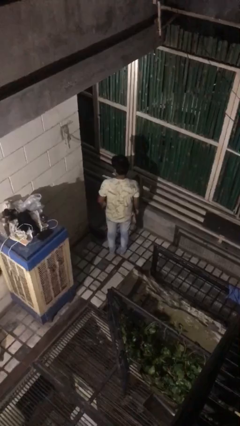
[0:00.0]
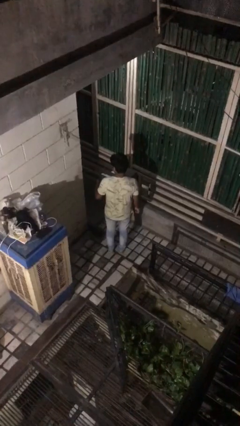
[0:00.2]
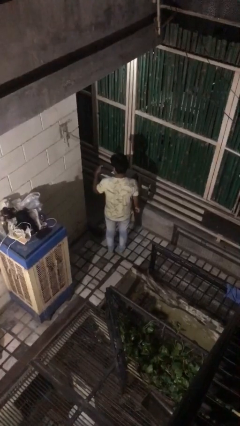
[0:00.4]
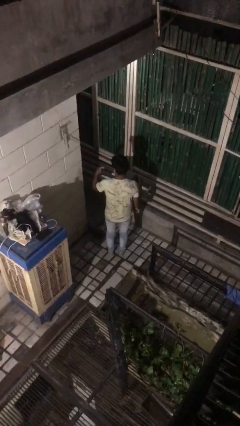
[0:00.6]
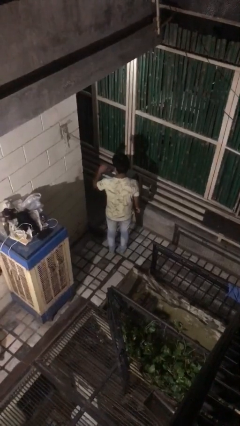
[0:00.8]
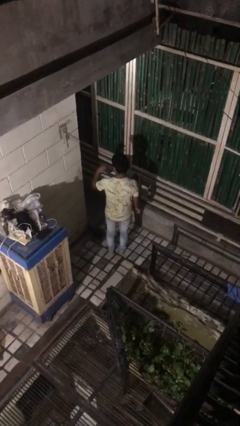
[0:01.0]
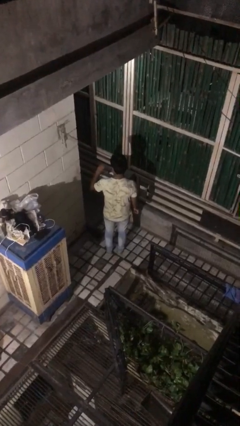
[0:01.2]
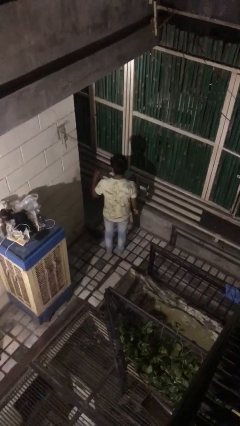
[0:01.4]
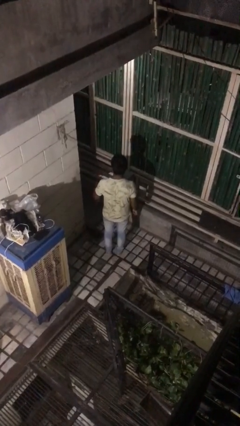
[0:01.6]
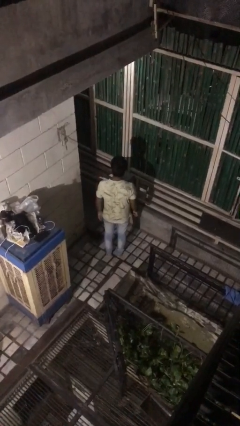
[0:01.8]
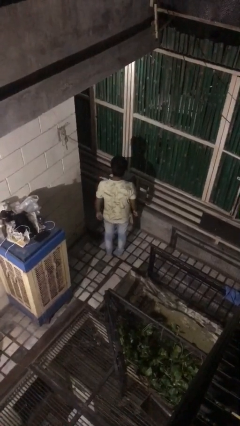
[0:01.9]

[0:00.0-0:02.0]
person gestures behind me

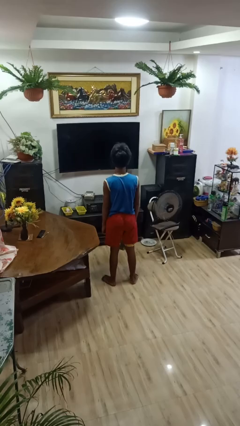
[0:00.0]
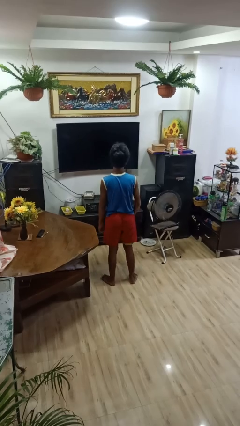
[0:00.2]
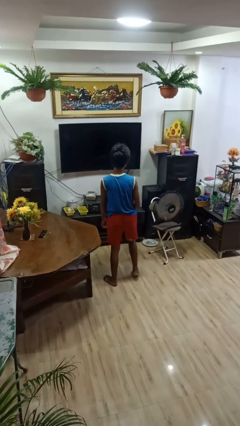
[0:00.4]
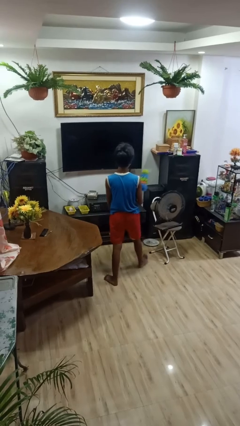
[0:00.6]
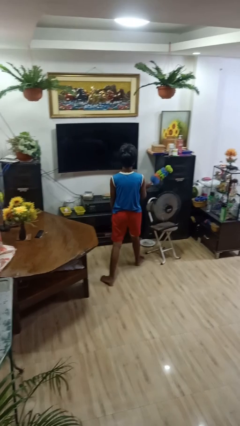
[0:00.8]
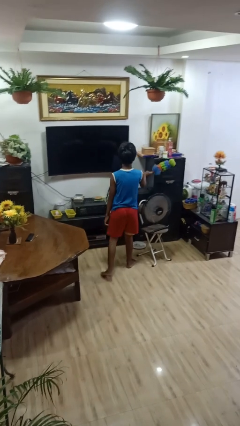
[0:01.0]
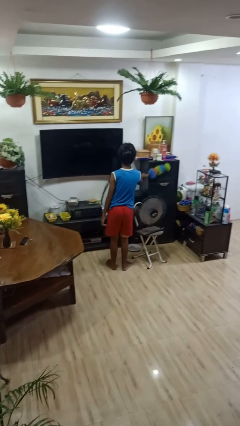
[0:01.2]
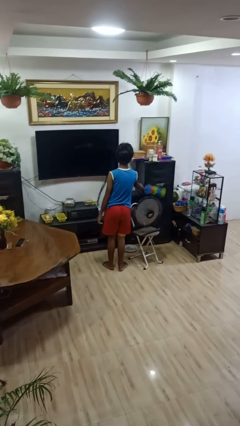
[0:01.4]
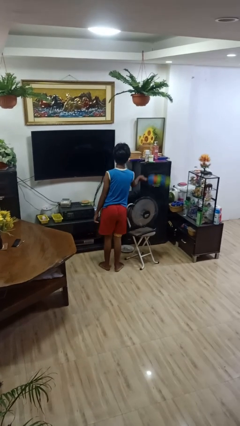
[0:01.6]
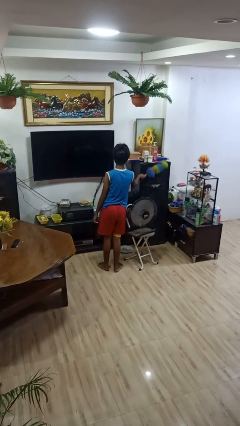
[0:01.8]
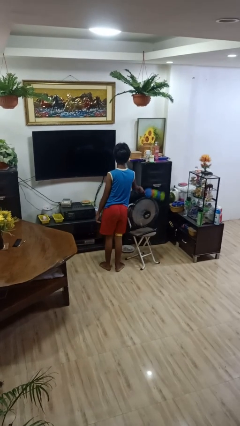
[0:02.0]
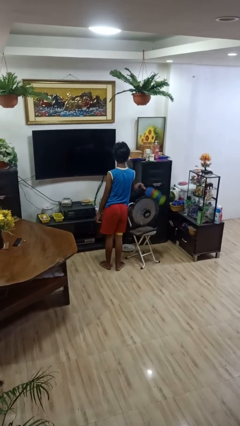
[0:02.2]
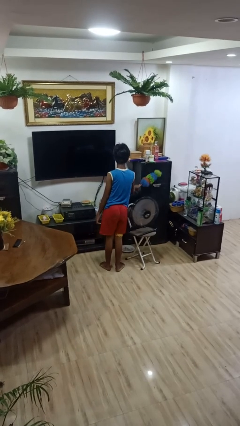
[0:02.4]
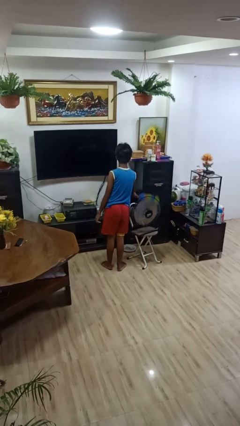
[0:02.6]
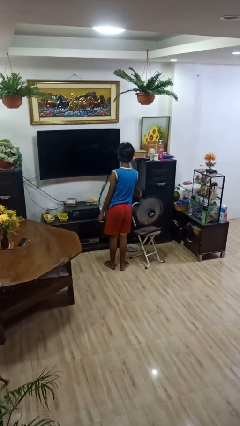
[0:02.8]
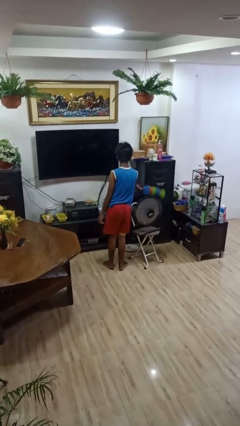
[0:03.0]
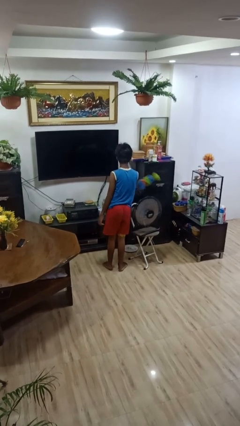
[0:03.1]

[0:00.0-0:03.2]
person dusts furniture

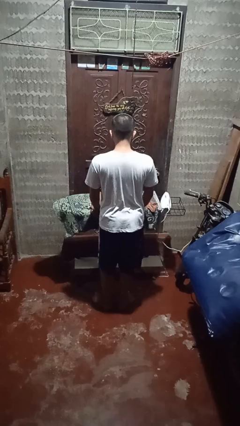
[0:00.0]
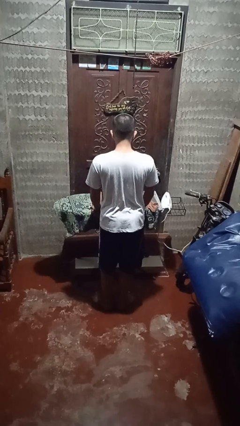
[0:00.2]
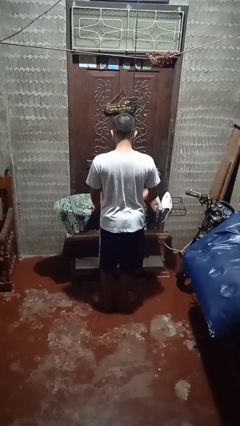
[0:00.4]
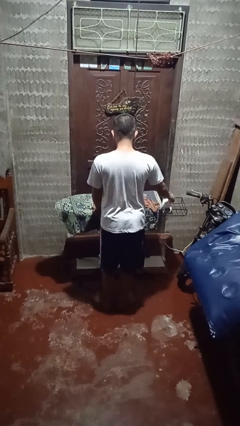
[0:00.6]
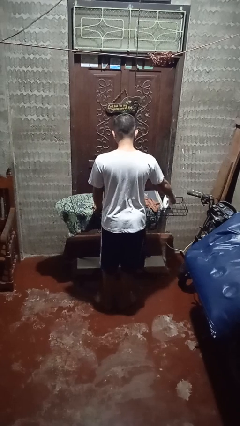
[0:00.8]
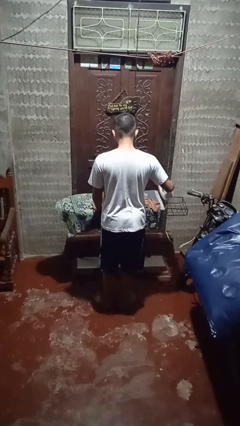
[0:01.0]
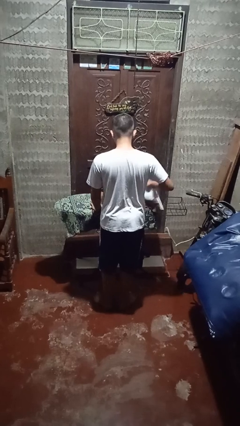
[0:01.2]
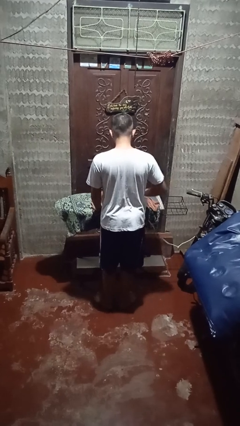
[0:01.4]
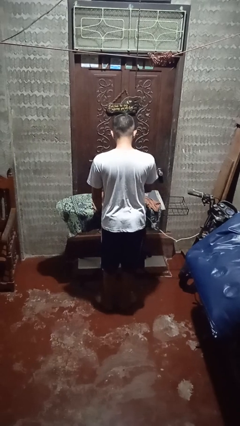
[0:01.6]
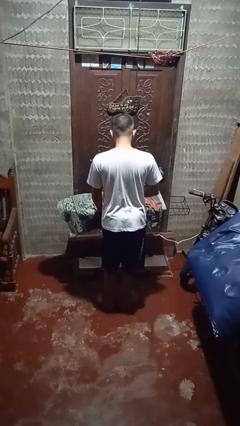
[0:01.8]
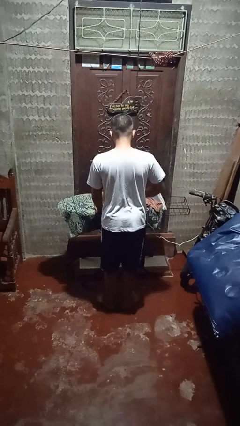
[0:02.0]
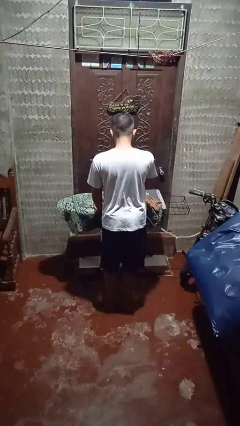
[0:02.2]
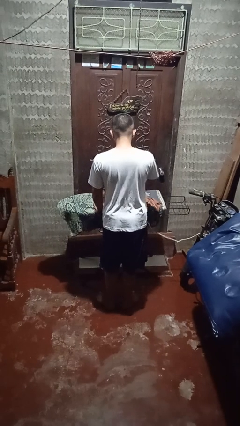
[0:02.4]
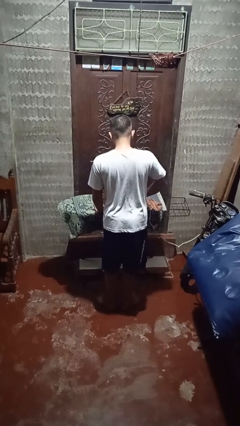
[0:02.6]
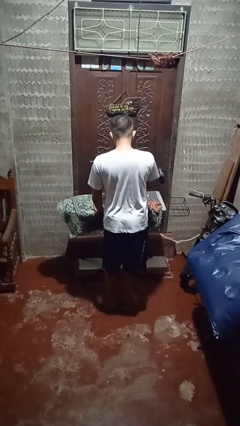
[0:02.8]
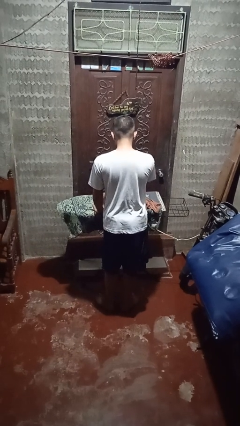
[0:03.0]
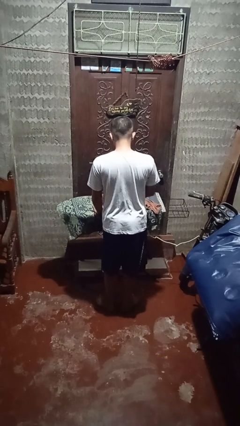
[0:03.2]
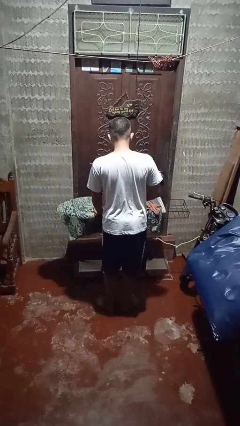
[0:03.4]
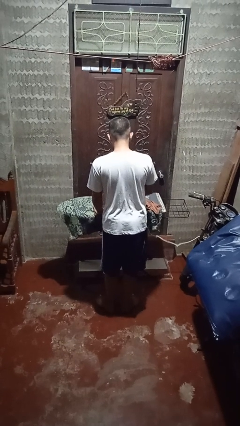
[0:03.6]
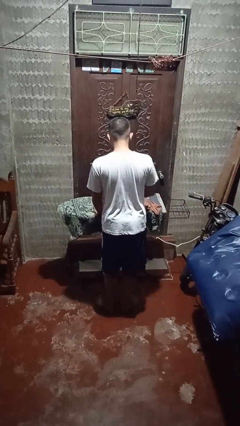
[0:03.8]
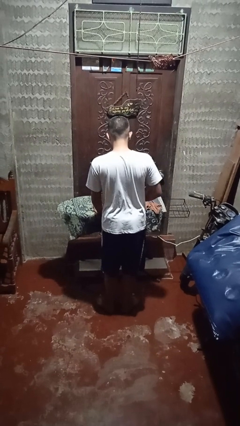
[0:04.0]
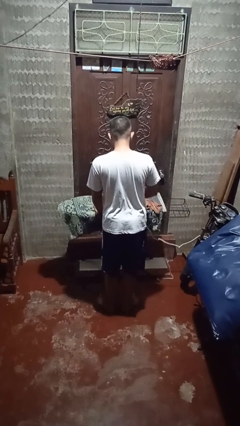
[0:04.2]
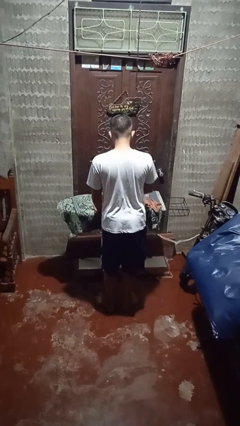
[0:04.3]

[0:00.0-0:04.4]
person irons clothes

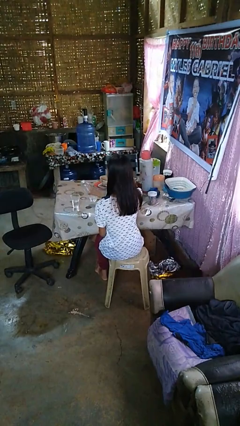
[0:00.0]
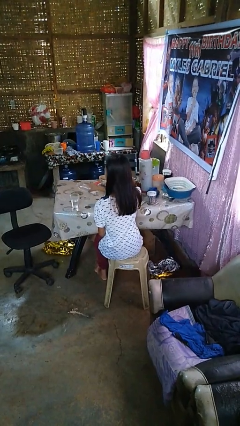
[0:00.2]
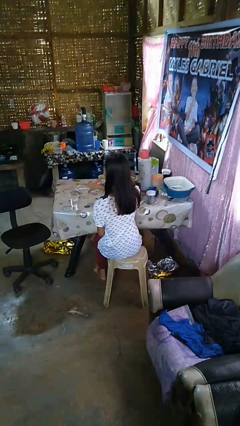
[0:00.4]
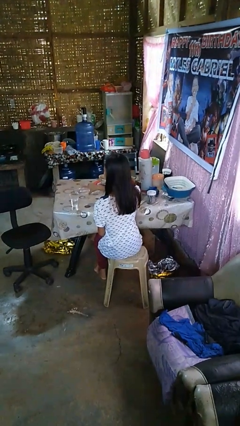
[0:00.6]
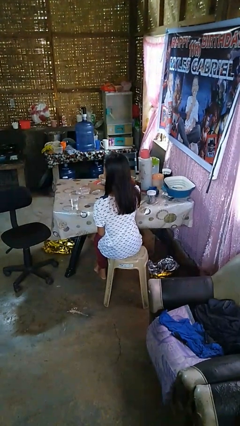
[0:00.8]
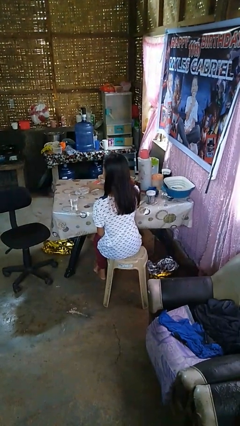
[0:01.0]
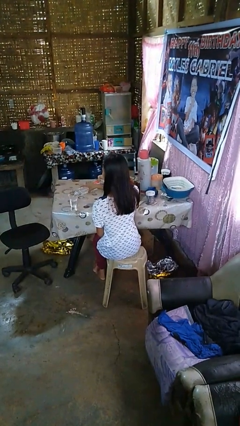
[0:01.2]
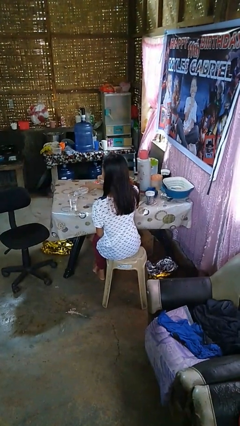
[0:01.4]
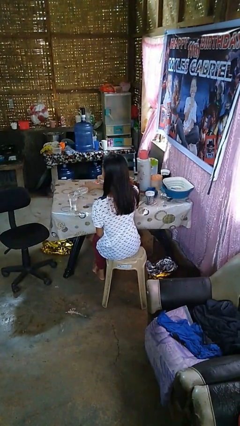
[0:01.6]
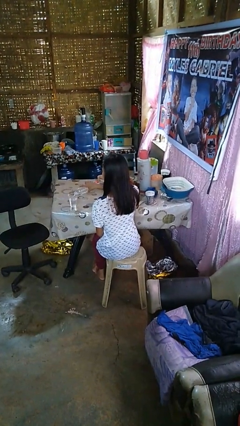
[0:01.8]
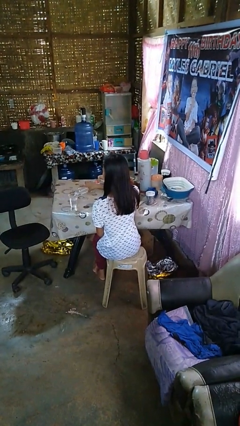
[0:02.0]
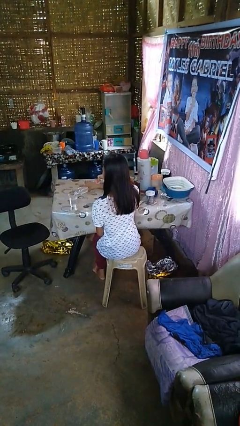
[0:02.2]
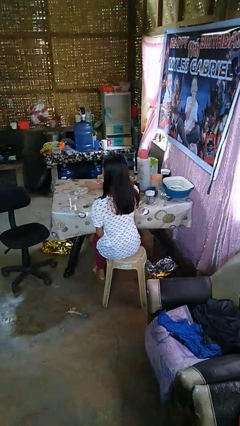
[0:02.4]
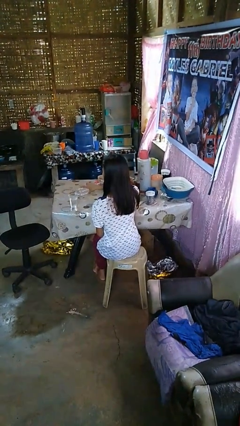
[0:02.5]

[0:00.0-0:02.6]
person pours liquid into cup

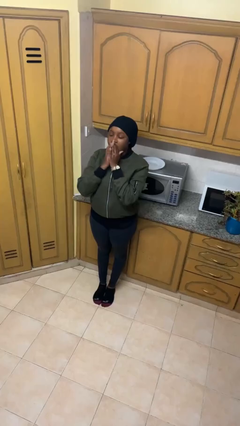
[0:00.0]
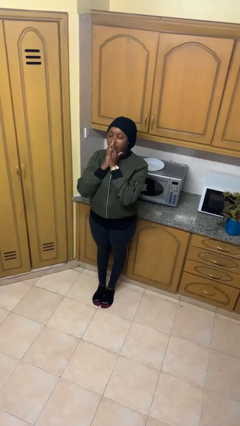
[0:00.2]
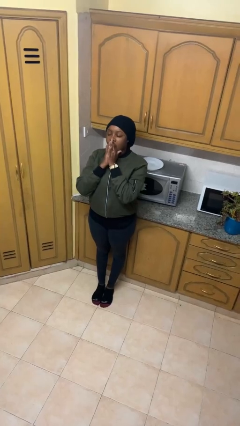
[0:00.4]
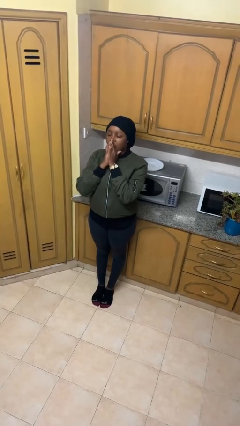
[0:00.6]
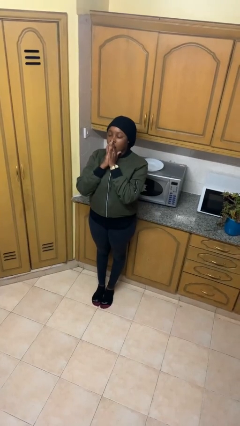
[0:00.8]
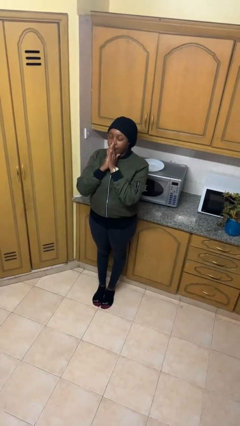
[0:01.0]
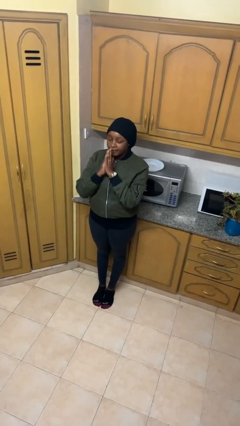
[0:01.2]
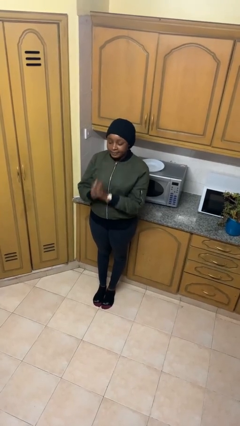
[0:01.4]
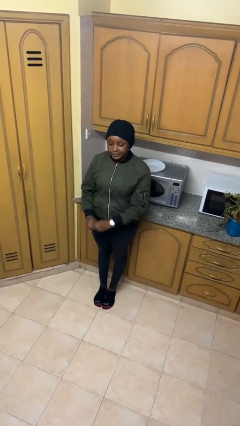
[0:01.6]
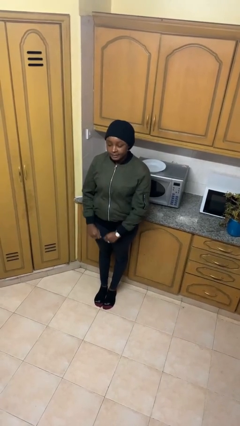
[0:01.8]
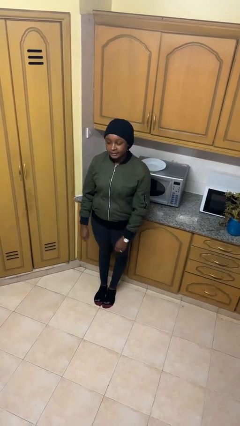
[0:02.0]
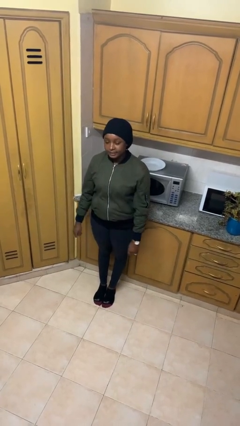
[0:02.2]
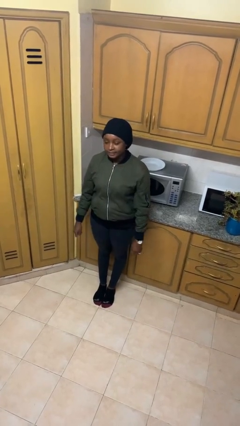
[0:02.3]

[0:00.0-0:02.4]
person yawns

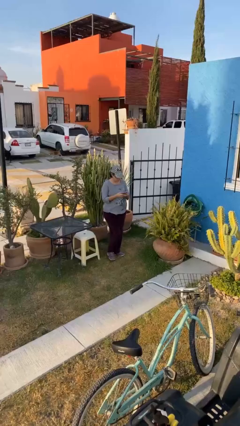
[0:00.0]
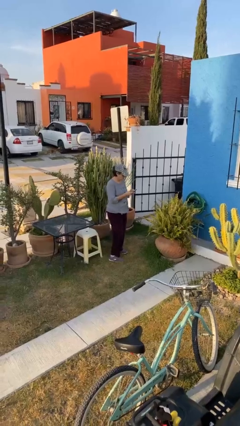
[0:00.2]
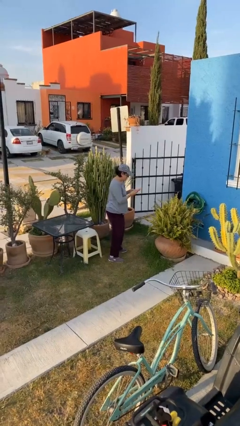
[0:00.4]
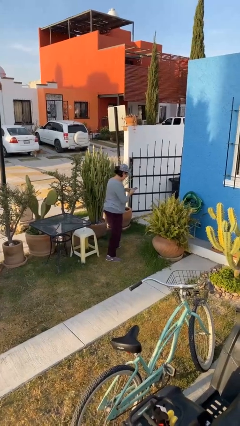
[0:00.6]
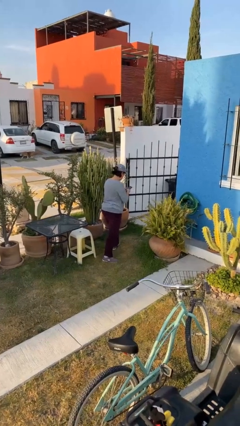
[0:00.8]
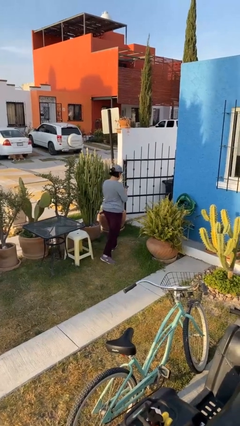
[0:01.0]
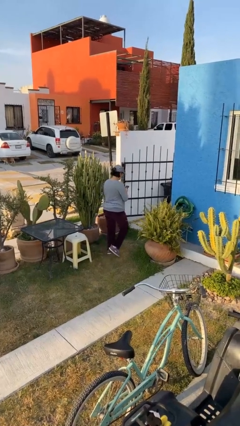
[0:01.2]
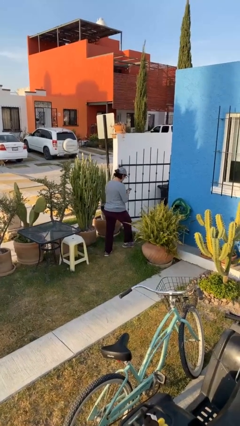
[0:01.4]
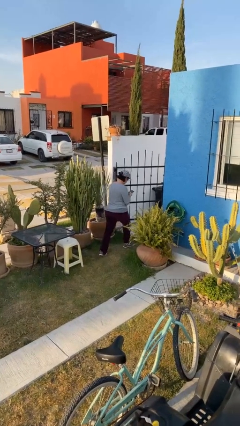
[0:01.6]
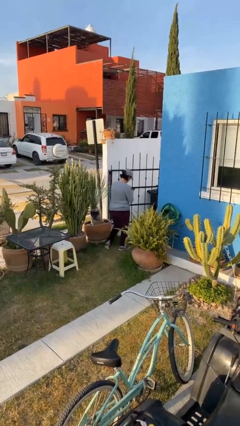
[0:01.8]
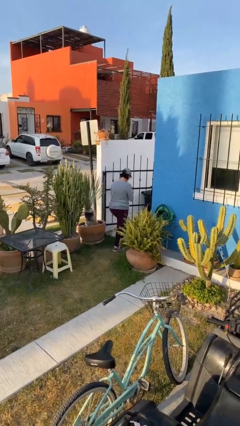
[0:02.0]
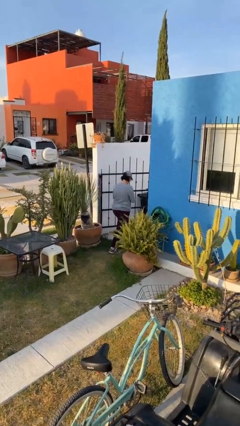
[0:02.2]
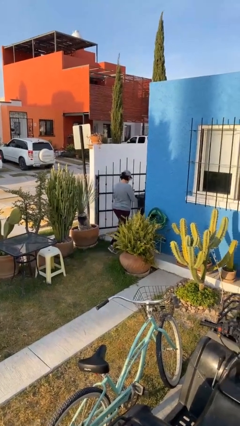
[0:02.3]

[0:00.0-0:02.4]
person exits scene through structure

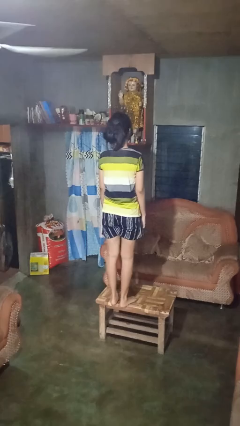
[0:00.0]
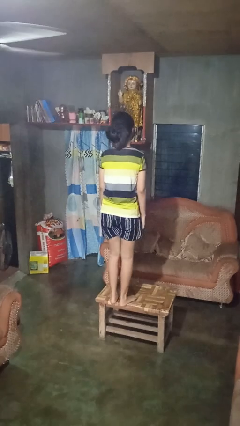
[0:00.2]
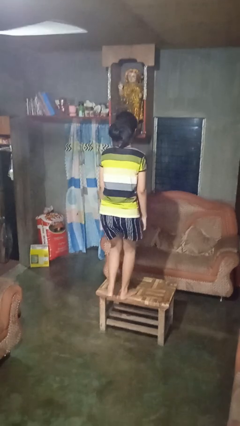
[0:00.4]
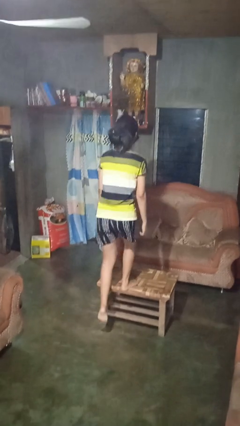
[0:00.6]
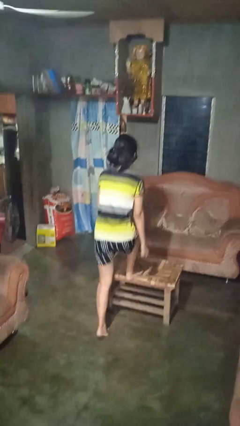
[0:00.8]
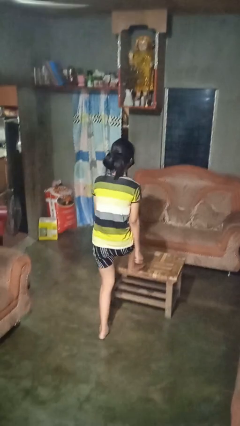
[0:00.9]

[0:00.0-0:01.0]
person climbs off table
